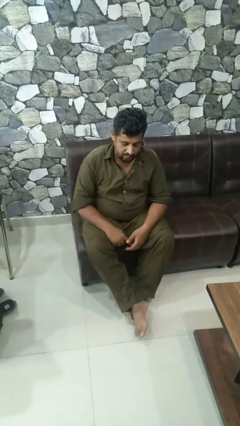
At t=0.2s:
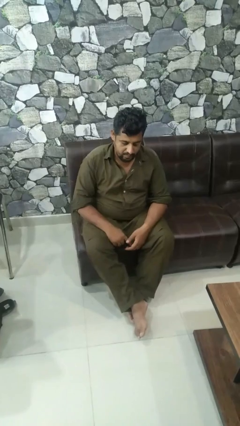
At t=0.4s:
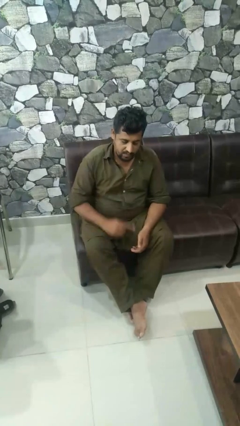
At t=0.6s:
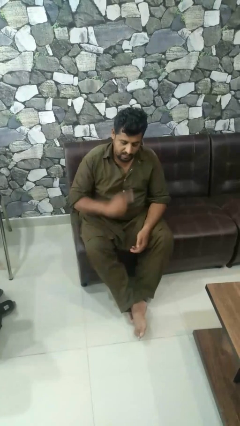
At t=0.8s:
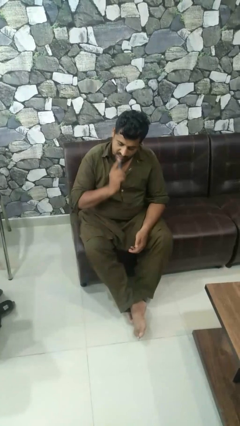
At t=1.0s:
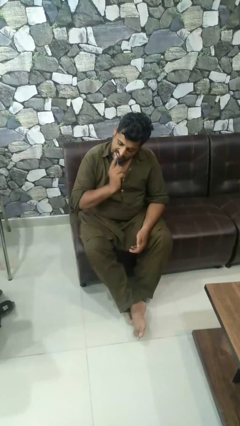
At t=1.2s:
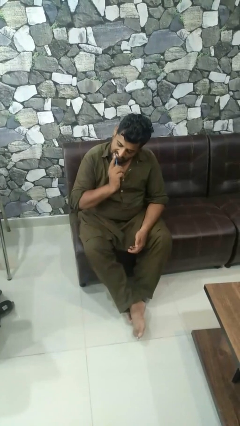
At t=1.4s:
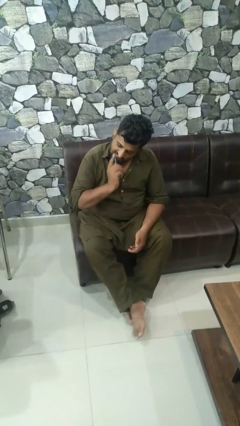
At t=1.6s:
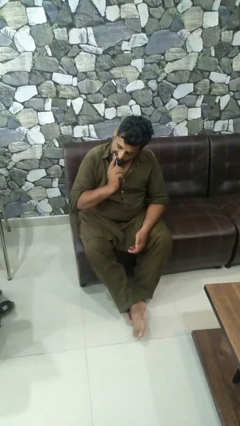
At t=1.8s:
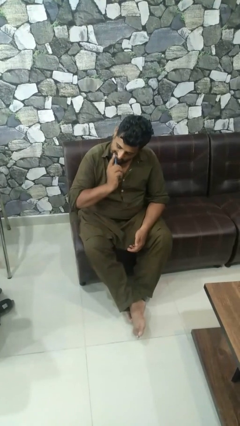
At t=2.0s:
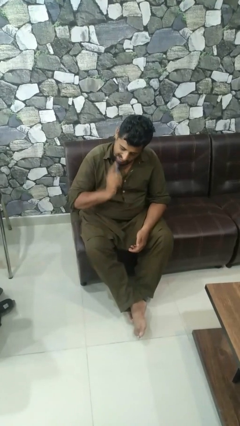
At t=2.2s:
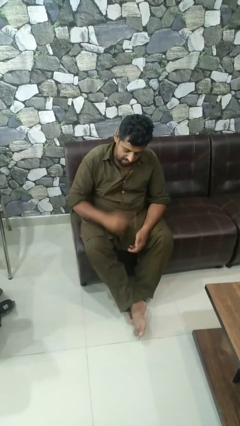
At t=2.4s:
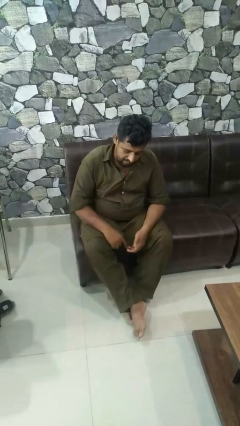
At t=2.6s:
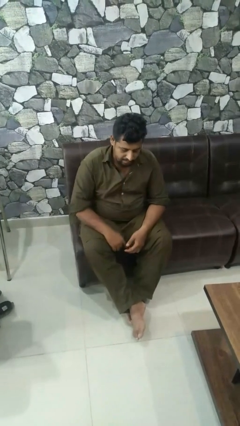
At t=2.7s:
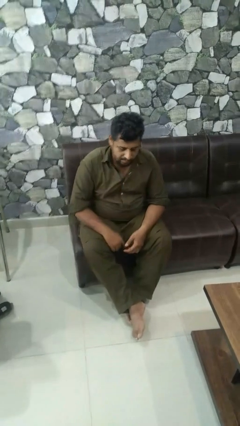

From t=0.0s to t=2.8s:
person brushes teeth

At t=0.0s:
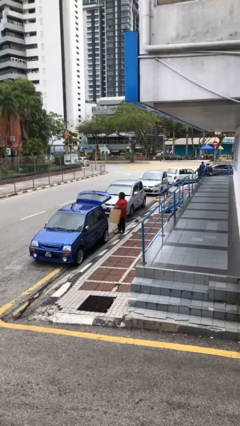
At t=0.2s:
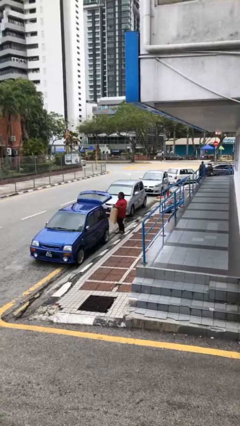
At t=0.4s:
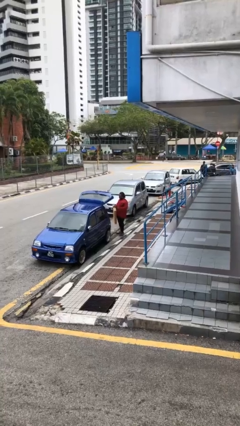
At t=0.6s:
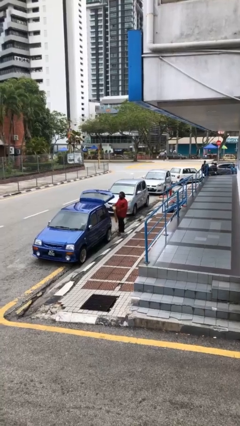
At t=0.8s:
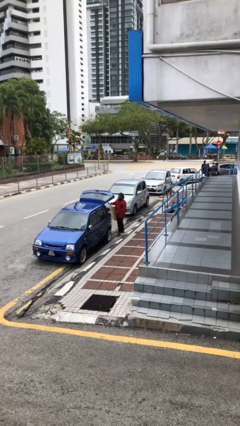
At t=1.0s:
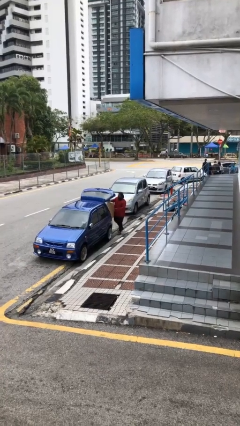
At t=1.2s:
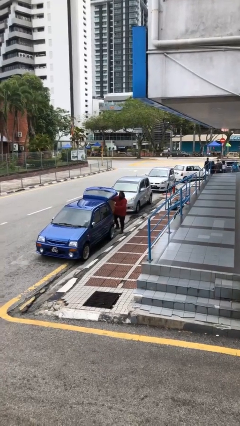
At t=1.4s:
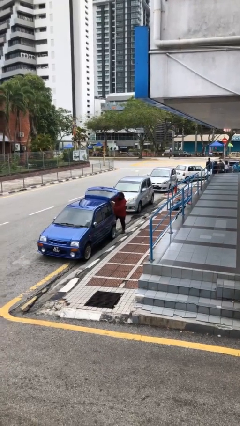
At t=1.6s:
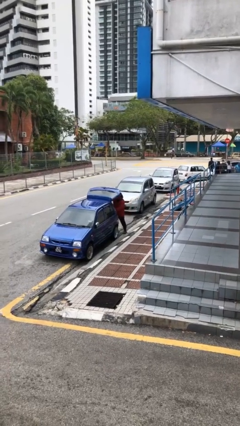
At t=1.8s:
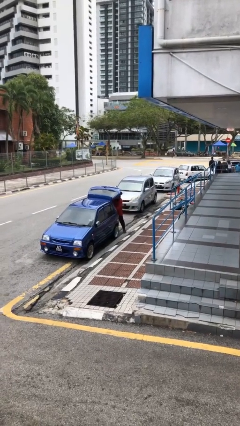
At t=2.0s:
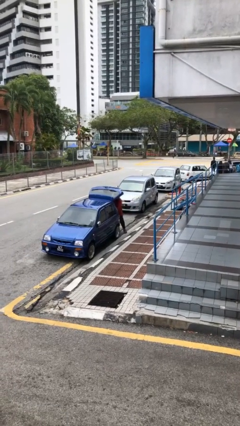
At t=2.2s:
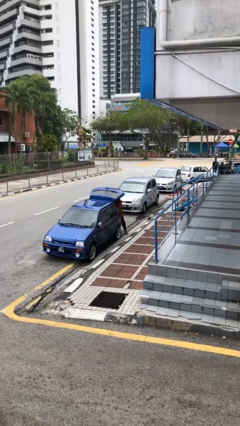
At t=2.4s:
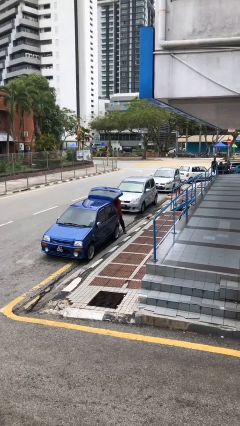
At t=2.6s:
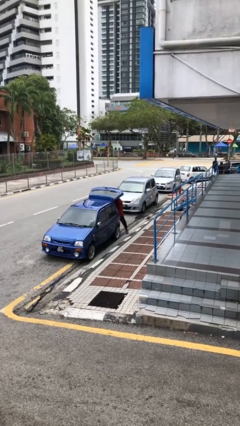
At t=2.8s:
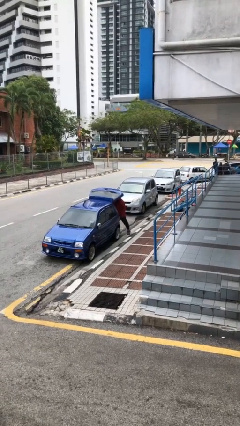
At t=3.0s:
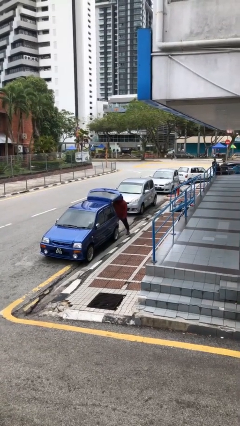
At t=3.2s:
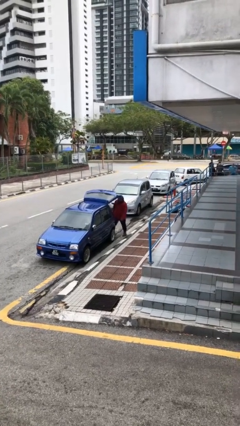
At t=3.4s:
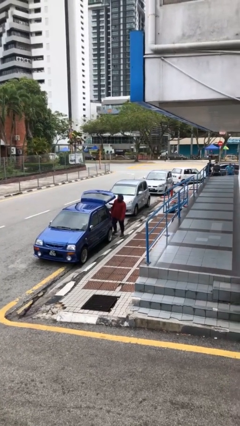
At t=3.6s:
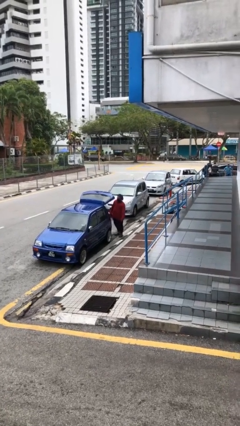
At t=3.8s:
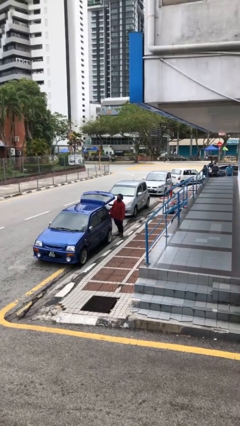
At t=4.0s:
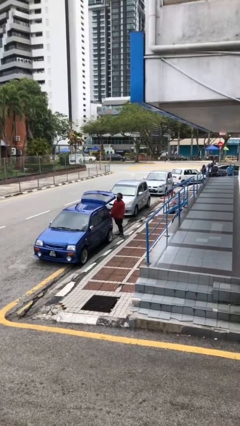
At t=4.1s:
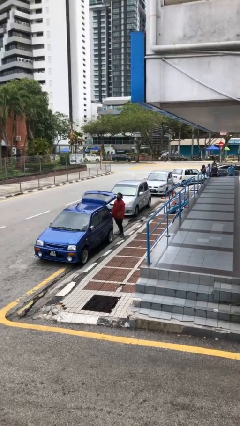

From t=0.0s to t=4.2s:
person loads car

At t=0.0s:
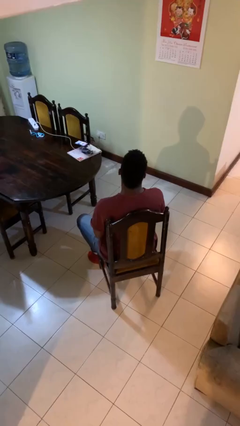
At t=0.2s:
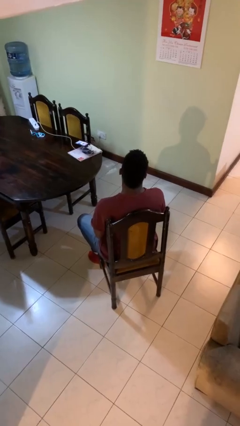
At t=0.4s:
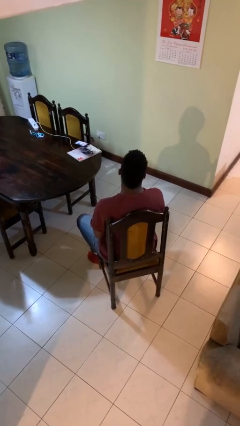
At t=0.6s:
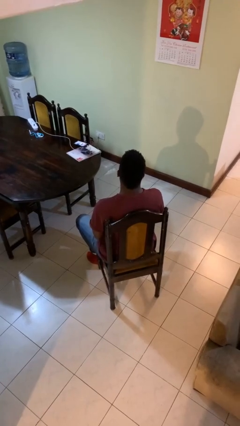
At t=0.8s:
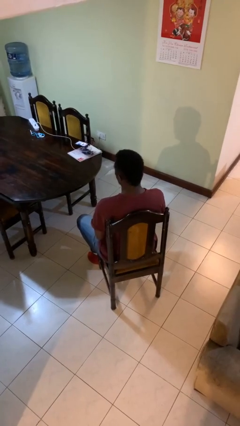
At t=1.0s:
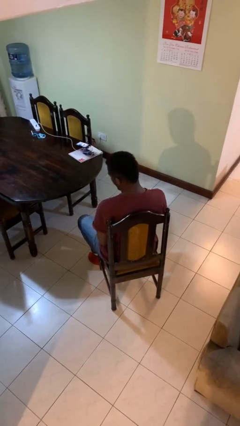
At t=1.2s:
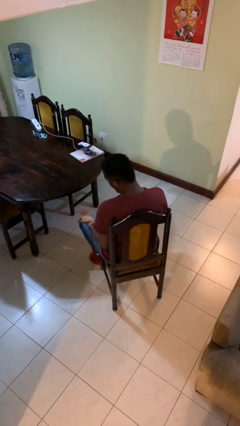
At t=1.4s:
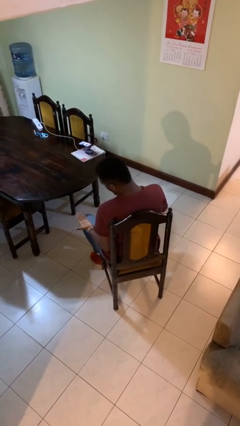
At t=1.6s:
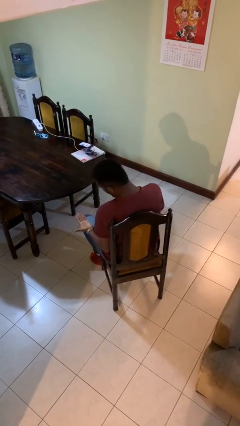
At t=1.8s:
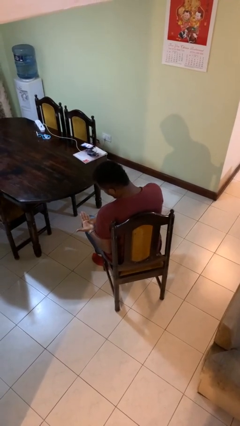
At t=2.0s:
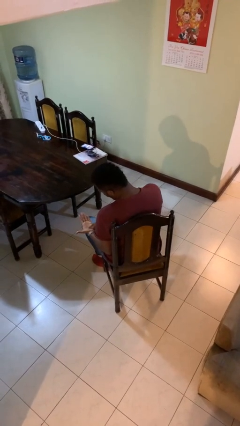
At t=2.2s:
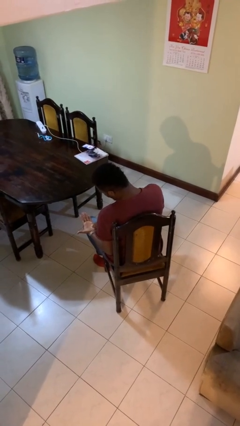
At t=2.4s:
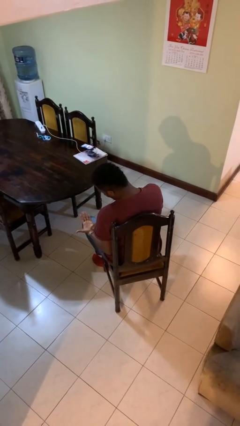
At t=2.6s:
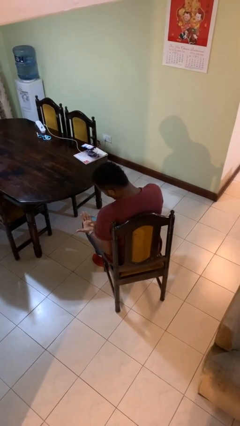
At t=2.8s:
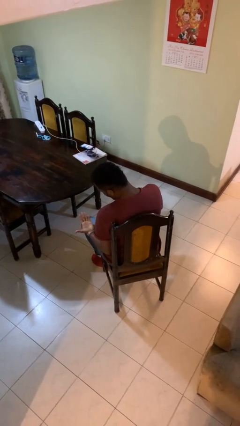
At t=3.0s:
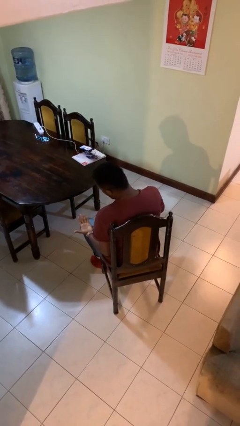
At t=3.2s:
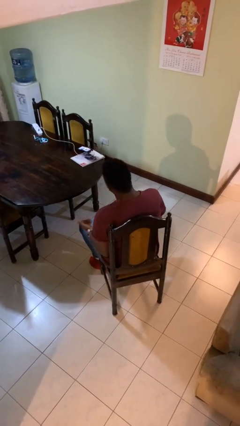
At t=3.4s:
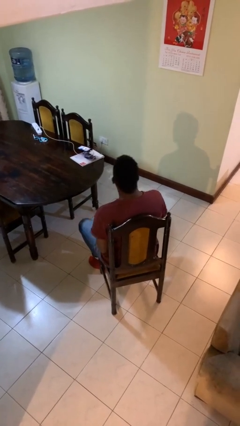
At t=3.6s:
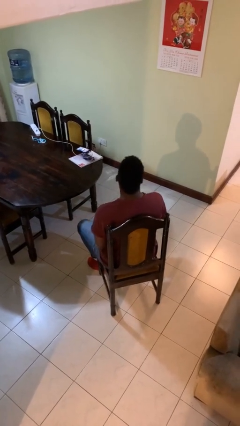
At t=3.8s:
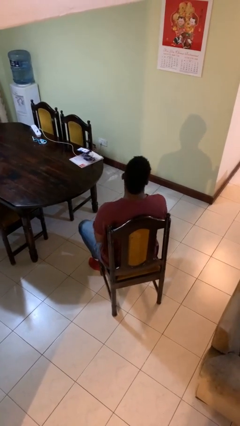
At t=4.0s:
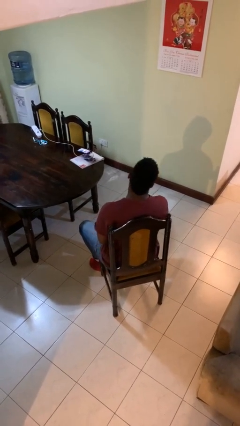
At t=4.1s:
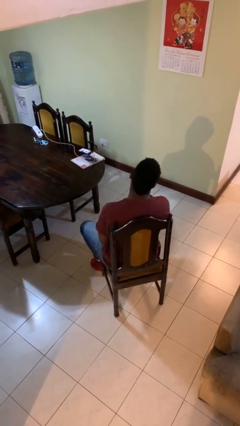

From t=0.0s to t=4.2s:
person looks at hands in lap

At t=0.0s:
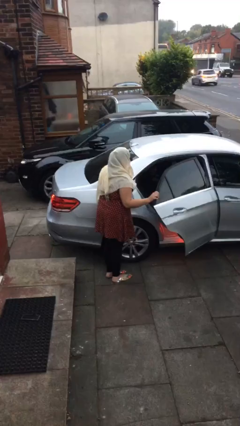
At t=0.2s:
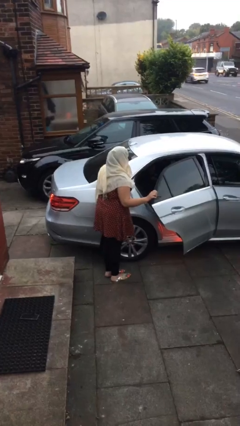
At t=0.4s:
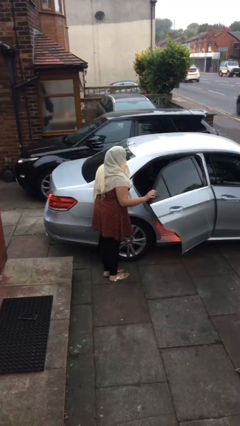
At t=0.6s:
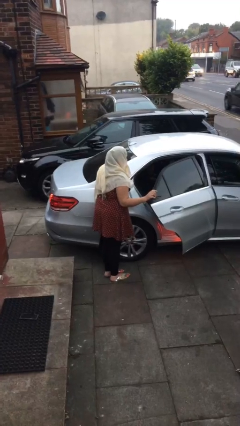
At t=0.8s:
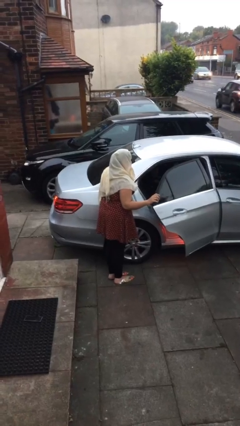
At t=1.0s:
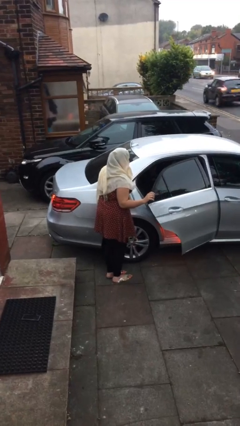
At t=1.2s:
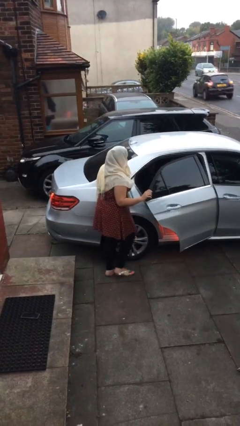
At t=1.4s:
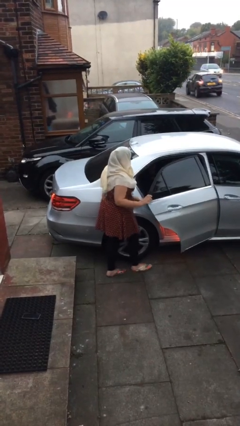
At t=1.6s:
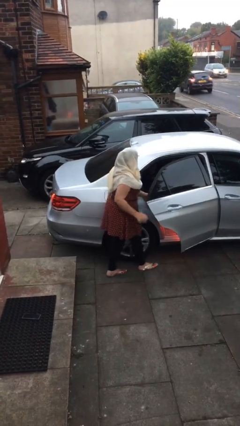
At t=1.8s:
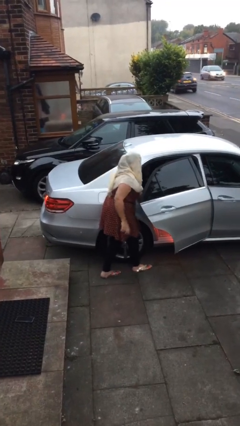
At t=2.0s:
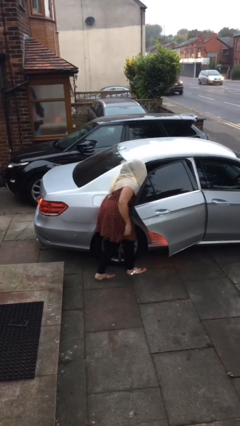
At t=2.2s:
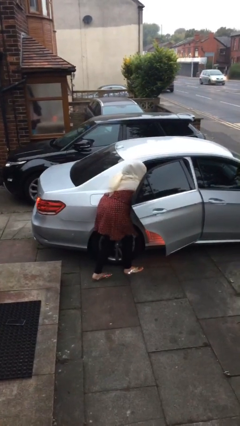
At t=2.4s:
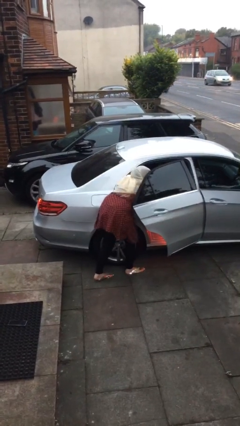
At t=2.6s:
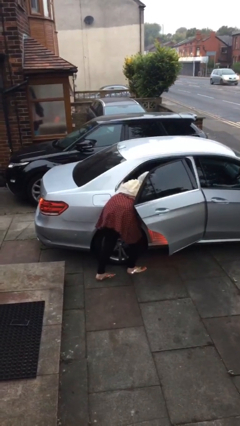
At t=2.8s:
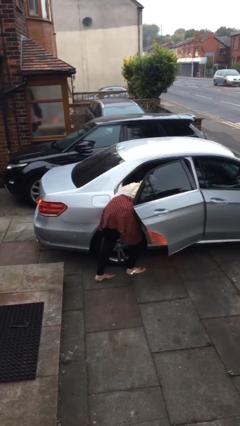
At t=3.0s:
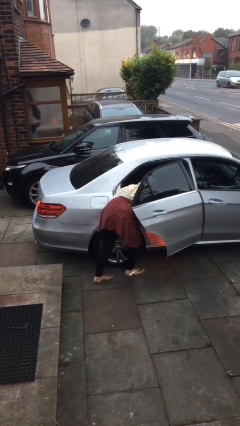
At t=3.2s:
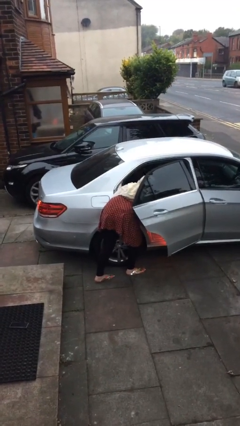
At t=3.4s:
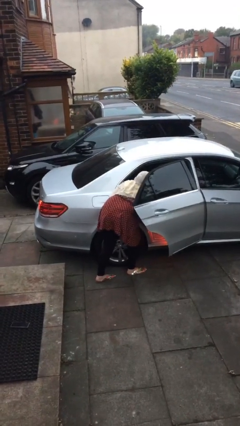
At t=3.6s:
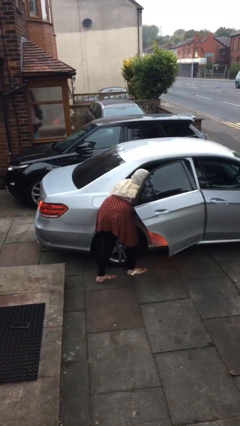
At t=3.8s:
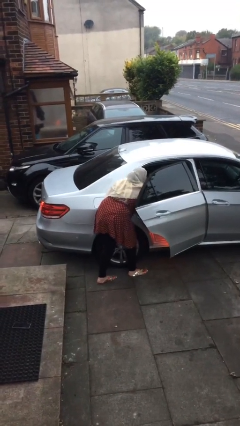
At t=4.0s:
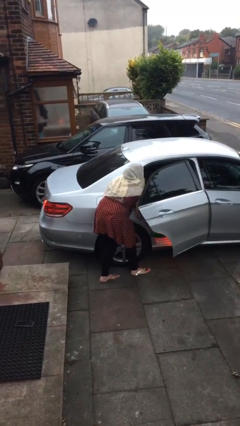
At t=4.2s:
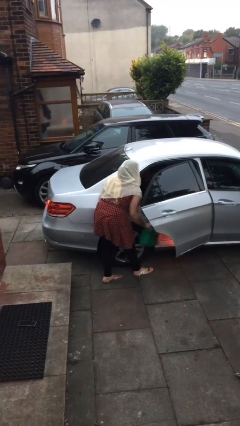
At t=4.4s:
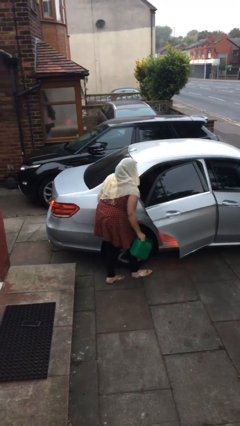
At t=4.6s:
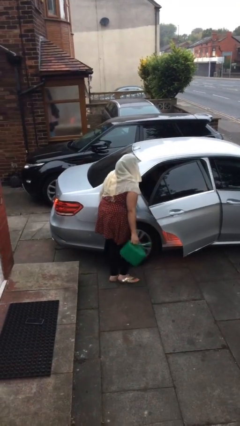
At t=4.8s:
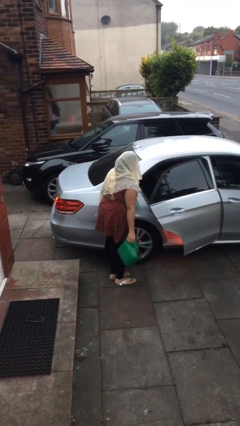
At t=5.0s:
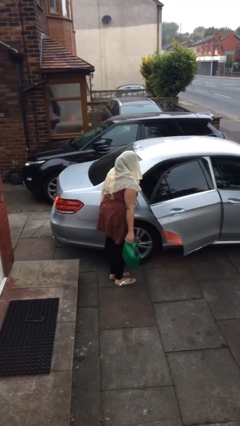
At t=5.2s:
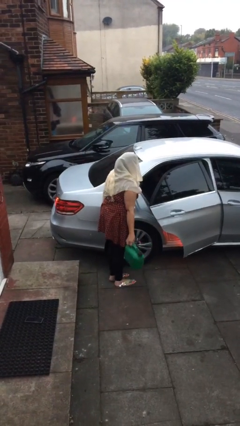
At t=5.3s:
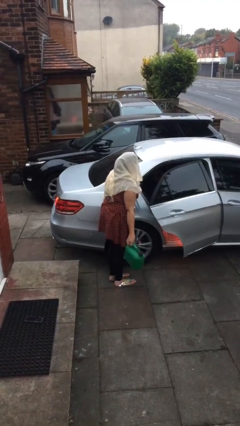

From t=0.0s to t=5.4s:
person unloads car

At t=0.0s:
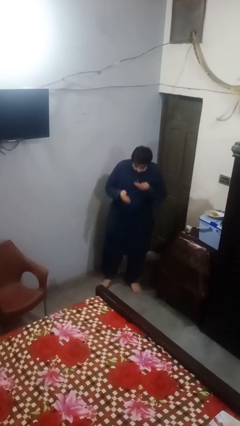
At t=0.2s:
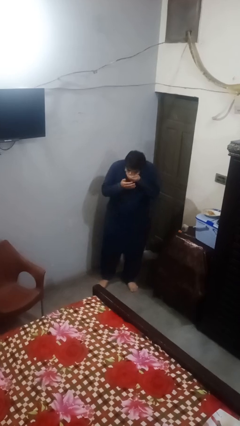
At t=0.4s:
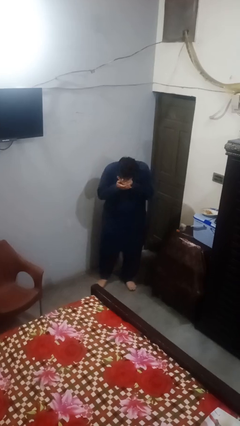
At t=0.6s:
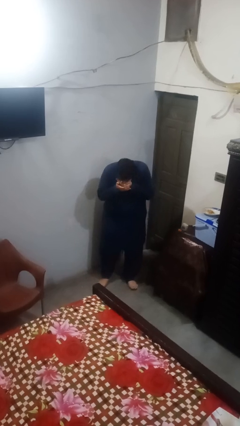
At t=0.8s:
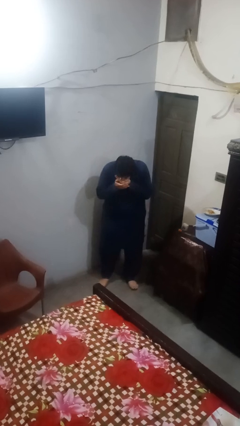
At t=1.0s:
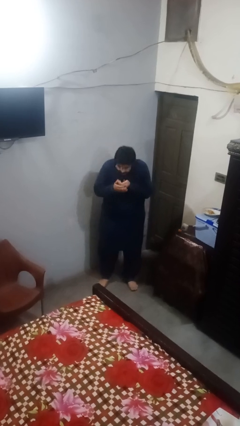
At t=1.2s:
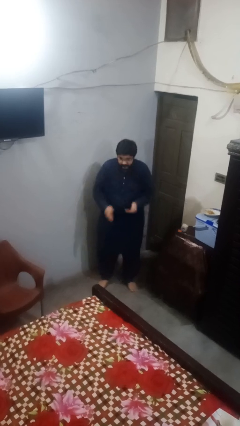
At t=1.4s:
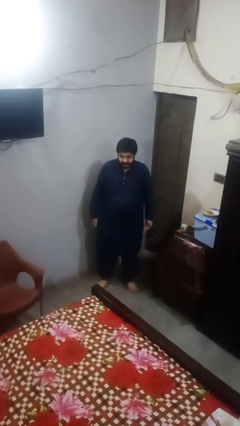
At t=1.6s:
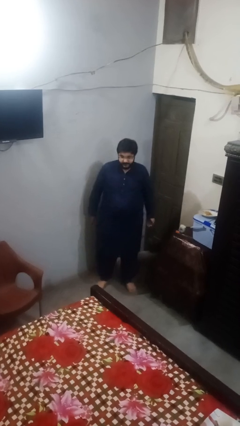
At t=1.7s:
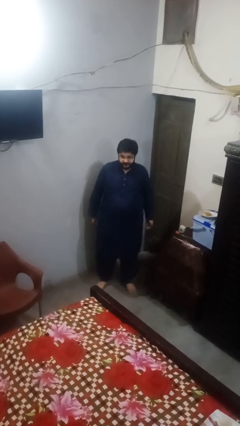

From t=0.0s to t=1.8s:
person sneezes into hand
